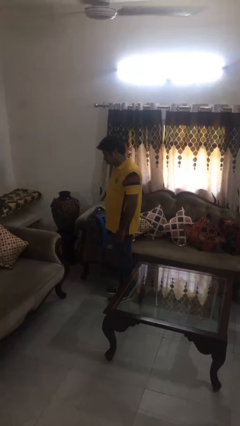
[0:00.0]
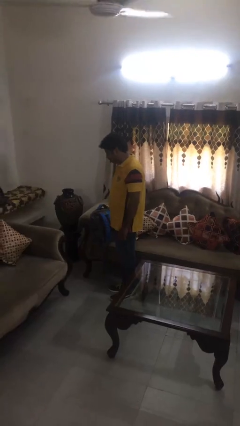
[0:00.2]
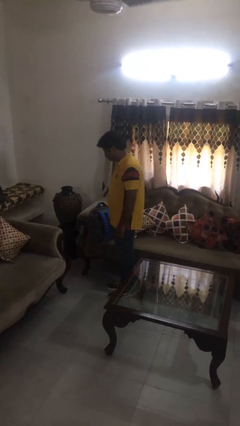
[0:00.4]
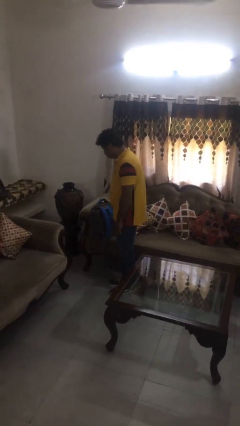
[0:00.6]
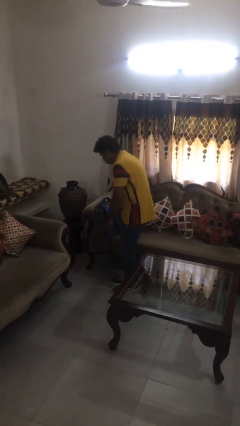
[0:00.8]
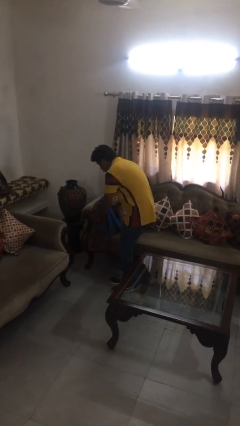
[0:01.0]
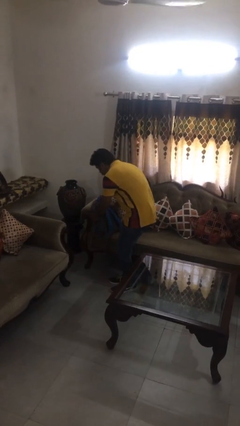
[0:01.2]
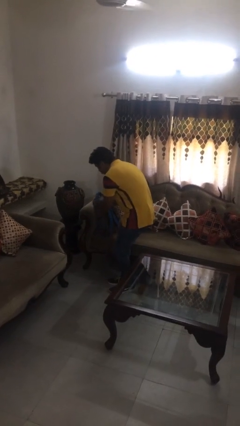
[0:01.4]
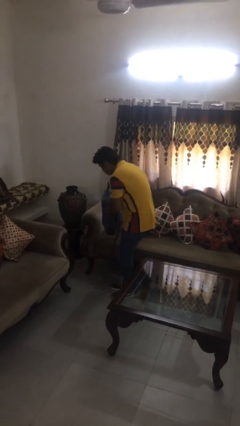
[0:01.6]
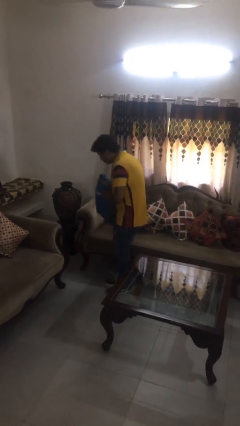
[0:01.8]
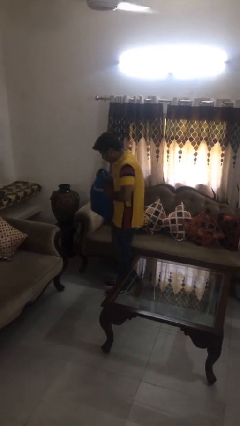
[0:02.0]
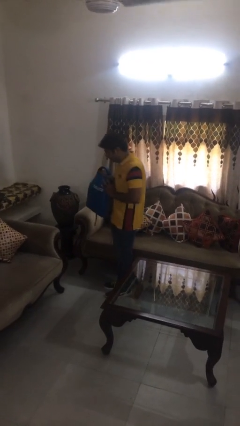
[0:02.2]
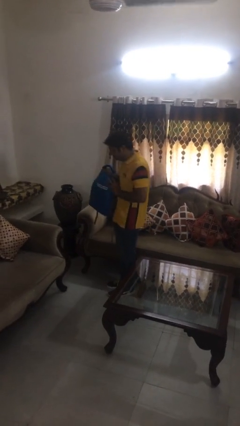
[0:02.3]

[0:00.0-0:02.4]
person picks up object from couch

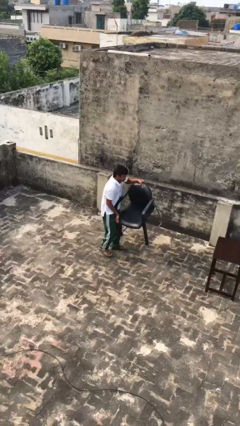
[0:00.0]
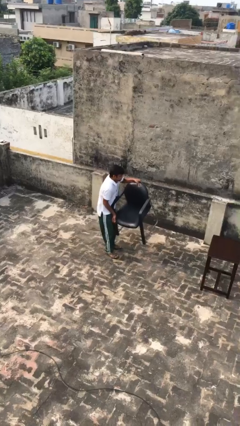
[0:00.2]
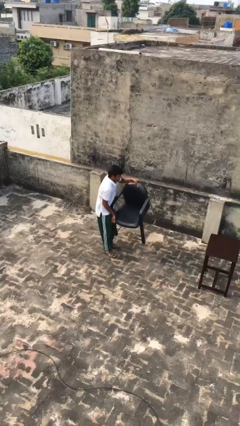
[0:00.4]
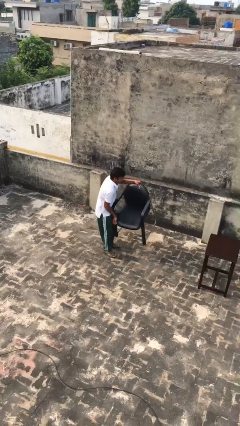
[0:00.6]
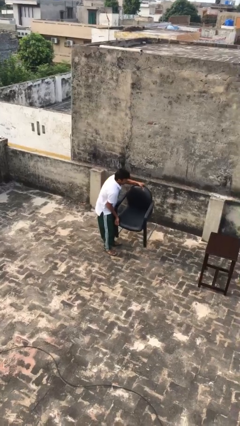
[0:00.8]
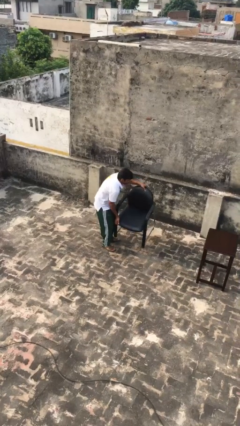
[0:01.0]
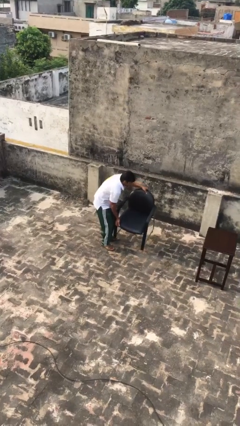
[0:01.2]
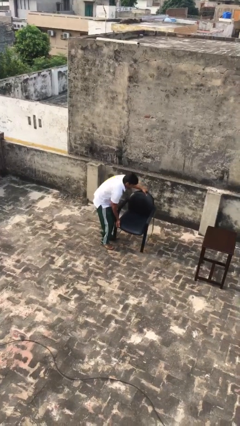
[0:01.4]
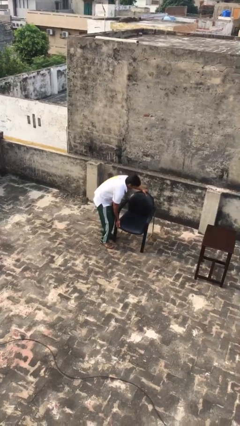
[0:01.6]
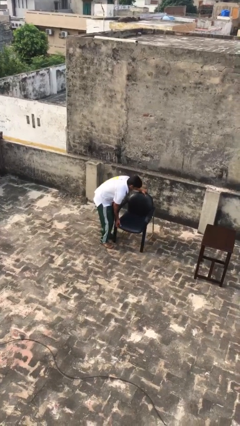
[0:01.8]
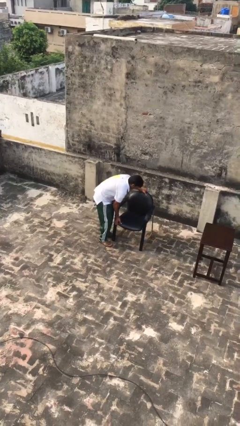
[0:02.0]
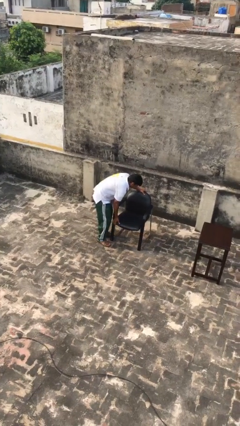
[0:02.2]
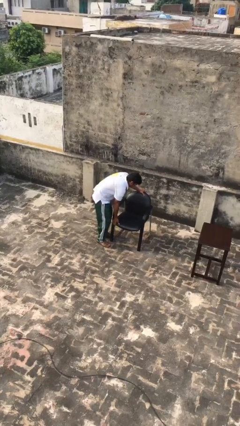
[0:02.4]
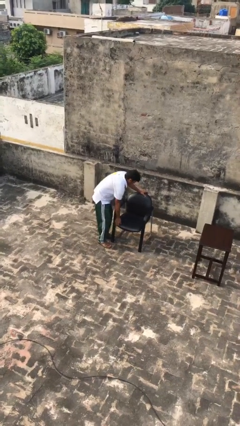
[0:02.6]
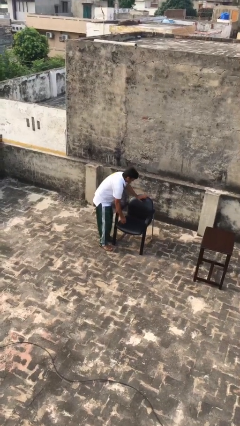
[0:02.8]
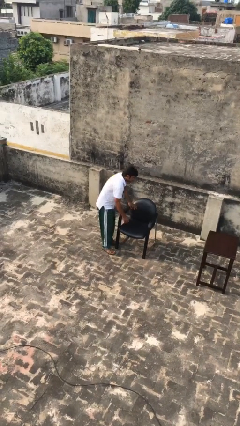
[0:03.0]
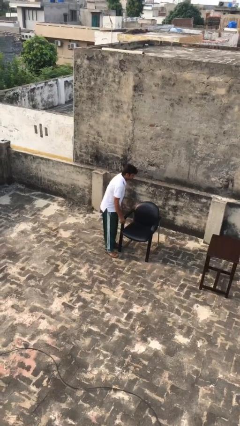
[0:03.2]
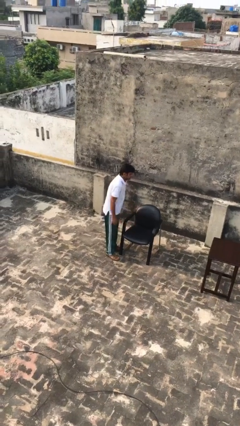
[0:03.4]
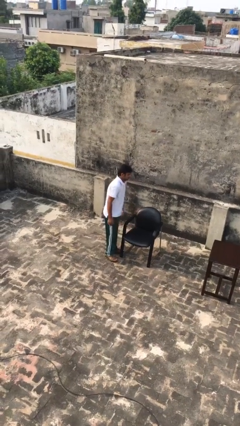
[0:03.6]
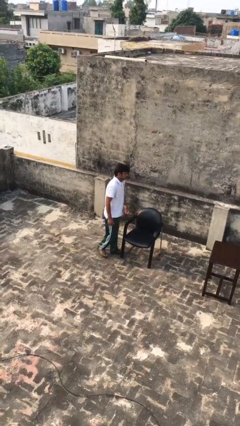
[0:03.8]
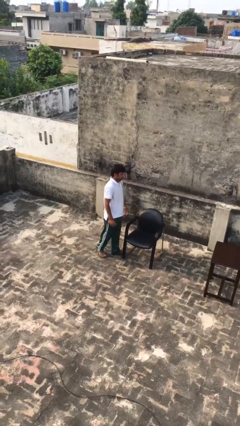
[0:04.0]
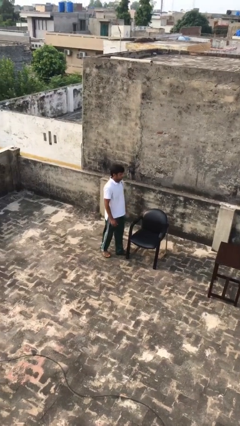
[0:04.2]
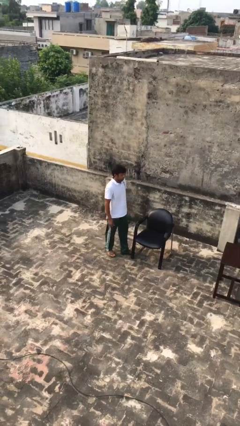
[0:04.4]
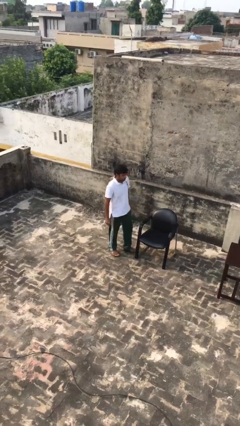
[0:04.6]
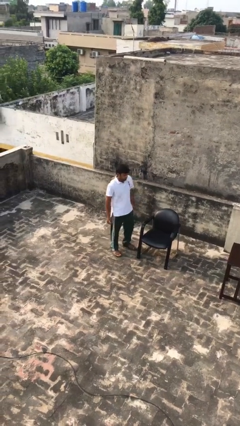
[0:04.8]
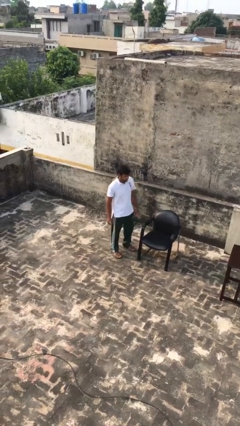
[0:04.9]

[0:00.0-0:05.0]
person puts down object on floor

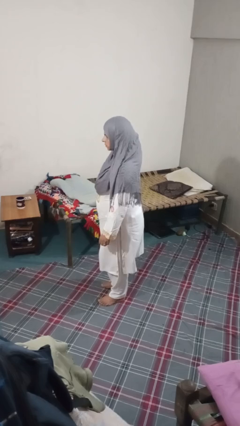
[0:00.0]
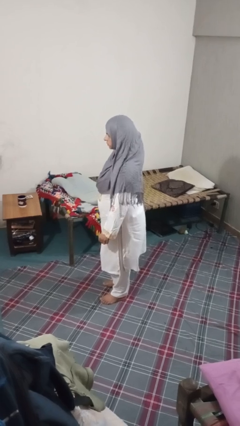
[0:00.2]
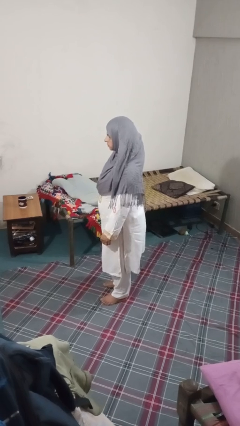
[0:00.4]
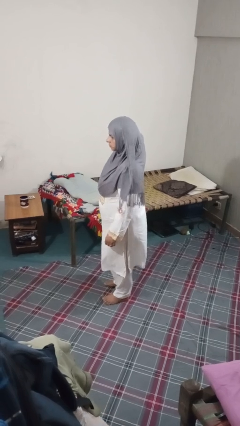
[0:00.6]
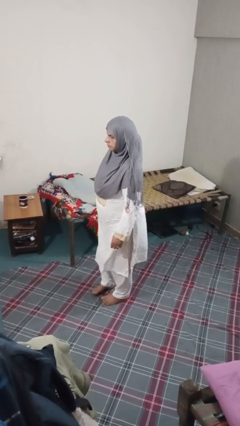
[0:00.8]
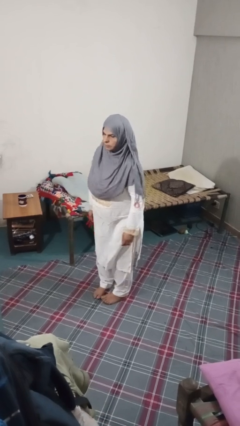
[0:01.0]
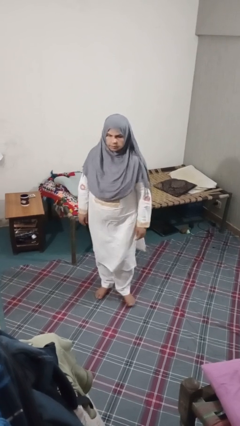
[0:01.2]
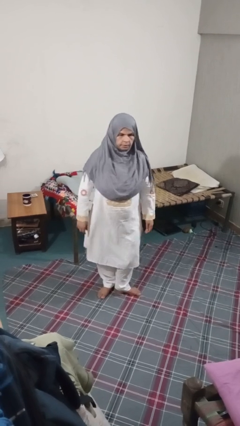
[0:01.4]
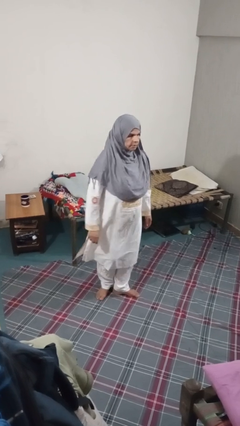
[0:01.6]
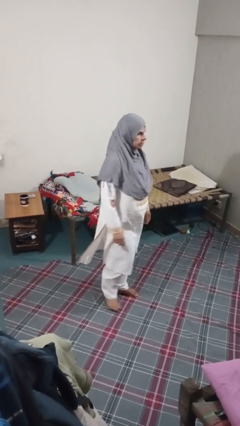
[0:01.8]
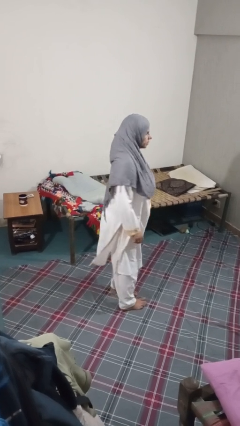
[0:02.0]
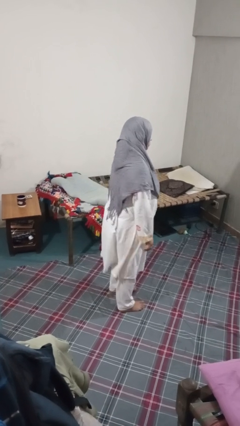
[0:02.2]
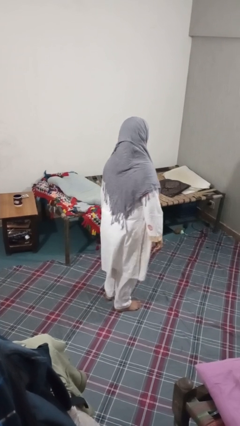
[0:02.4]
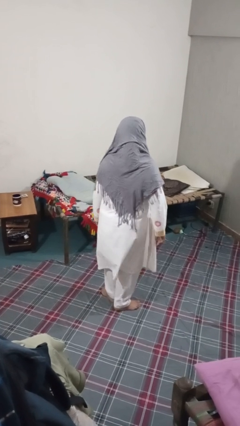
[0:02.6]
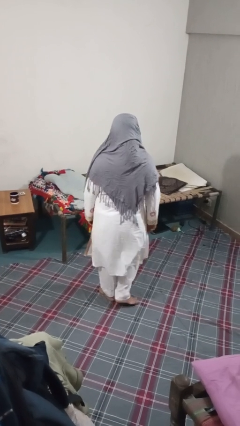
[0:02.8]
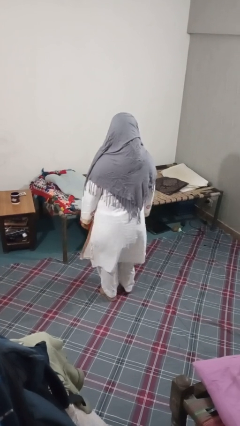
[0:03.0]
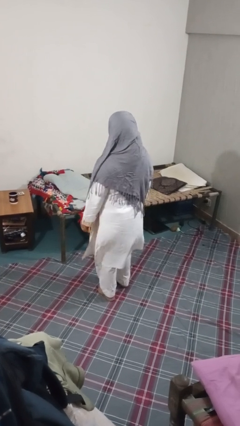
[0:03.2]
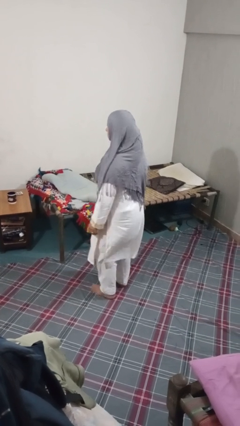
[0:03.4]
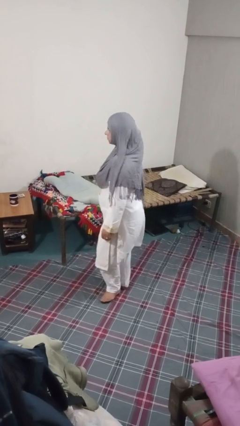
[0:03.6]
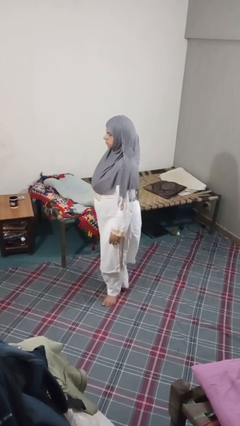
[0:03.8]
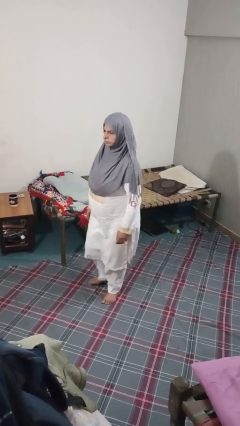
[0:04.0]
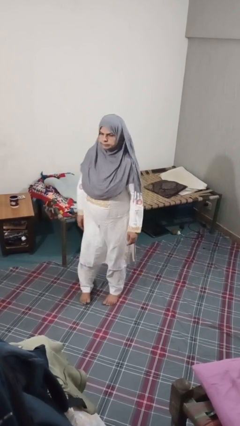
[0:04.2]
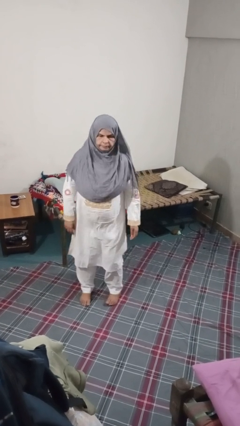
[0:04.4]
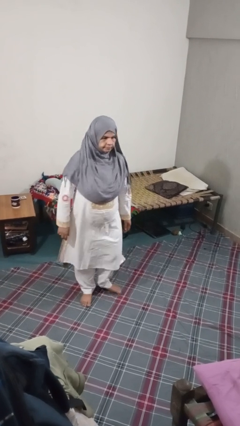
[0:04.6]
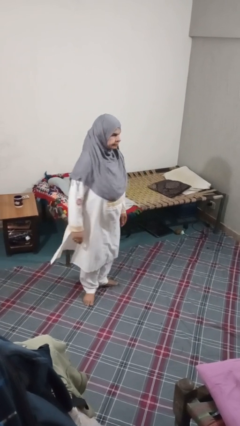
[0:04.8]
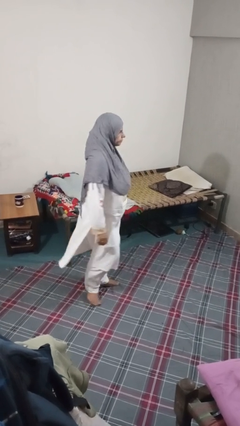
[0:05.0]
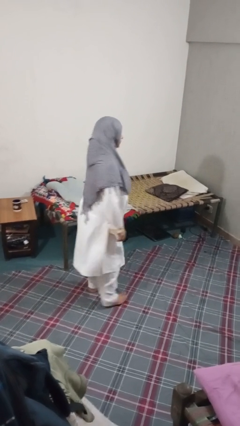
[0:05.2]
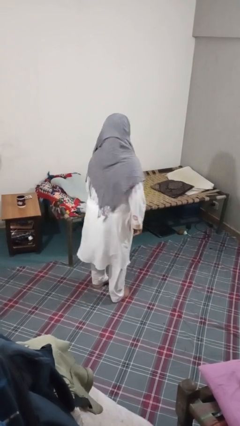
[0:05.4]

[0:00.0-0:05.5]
person twirls

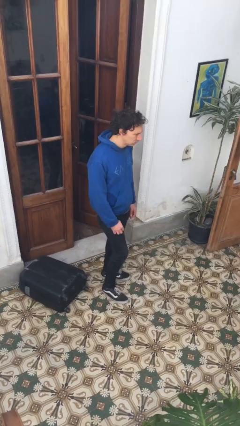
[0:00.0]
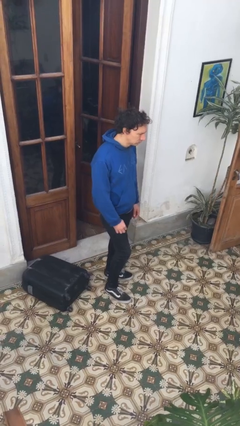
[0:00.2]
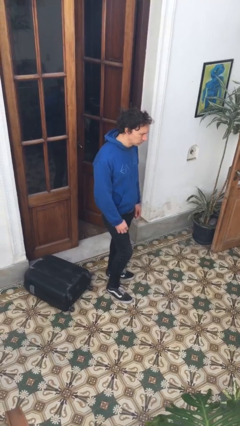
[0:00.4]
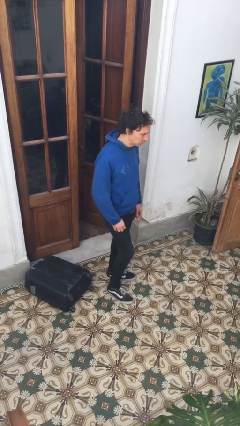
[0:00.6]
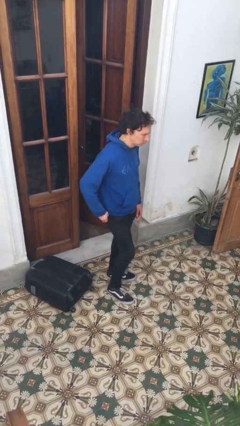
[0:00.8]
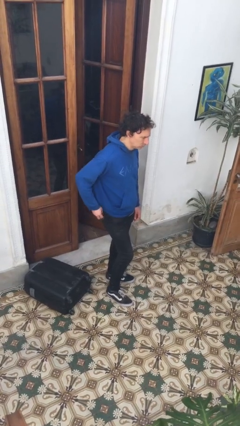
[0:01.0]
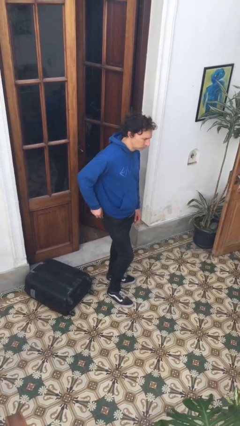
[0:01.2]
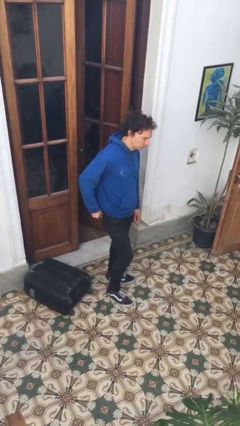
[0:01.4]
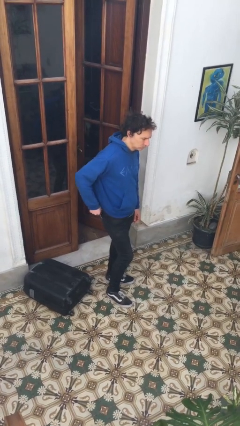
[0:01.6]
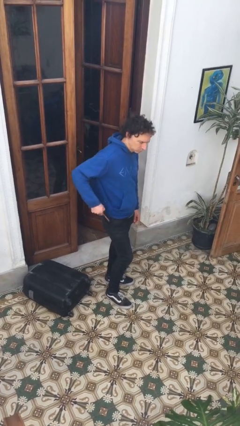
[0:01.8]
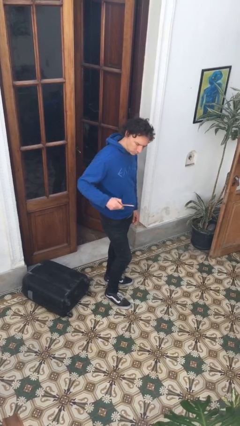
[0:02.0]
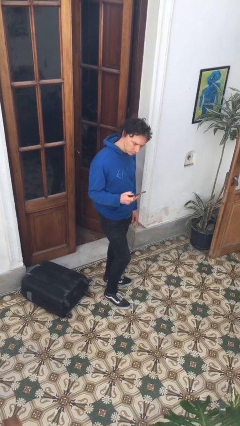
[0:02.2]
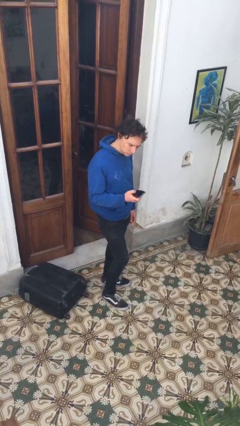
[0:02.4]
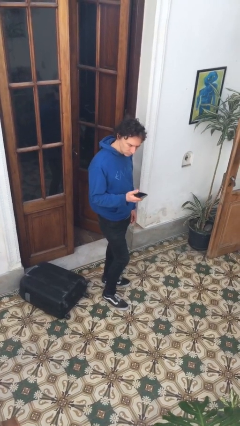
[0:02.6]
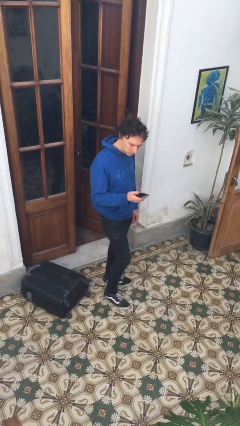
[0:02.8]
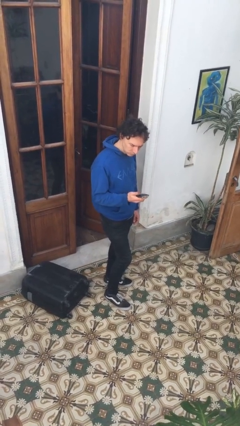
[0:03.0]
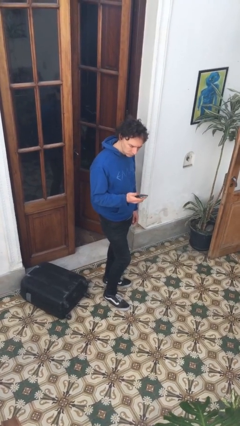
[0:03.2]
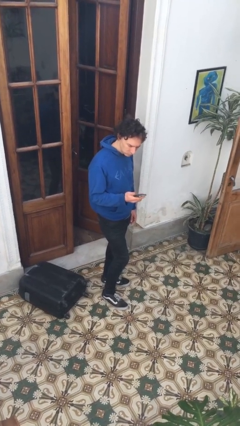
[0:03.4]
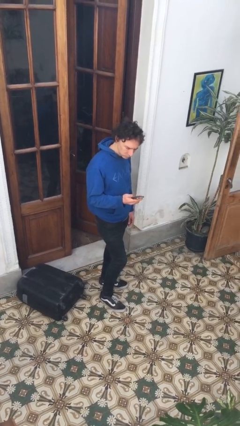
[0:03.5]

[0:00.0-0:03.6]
person takes phone from pocket

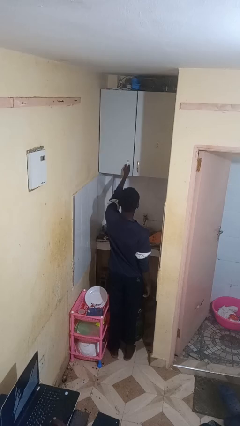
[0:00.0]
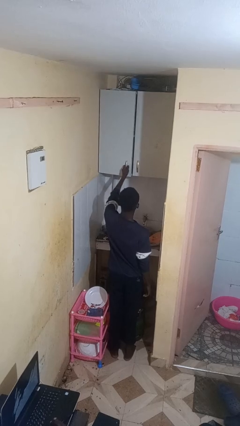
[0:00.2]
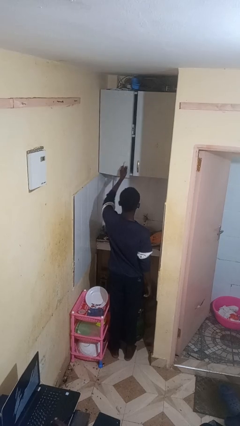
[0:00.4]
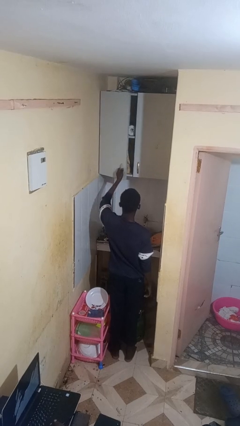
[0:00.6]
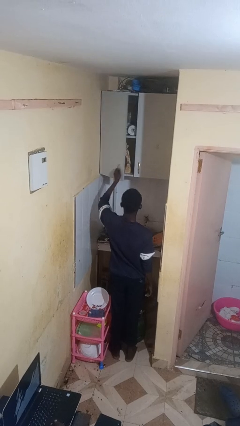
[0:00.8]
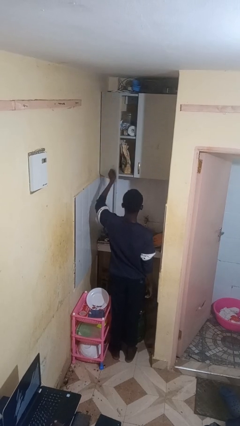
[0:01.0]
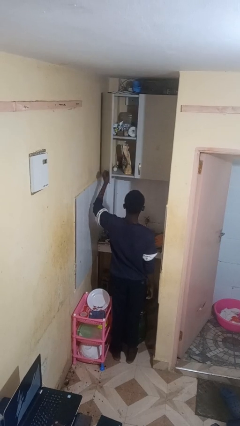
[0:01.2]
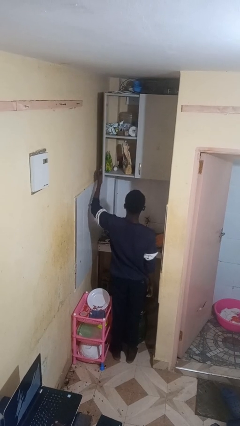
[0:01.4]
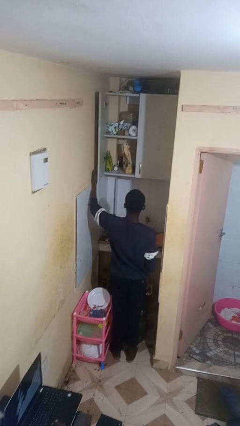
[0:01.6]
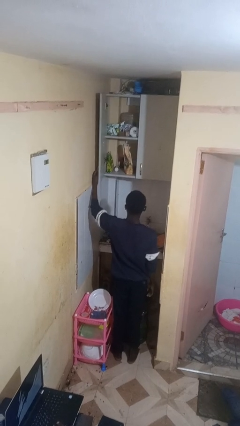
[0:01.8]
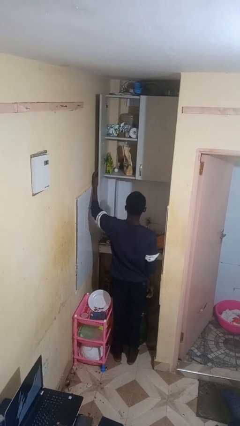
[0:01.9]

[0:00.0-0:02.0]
person opens cabinet
